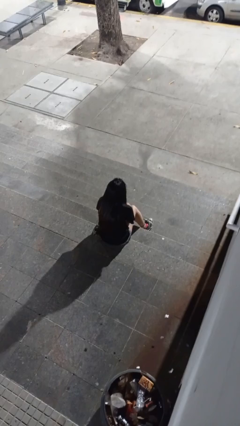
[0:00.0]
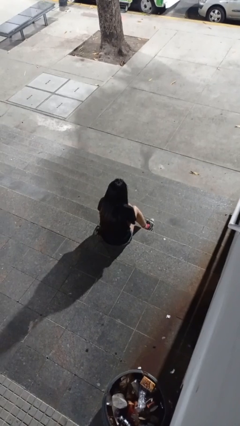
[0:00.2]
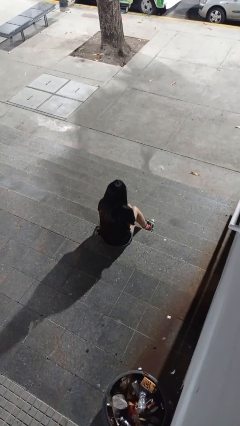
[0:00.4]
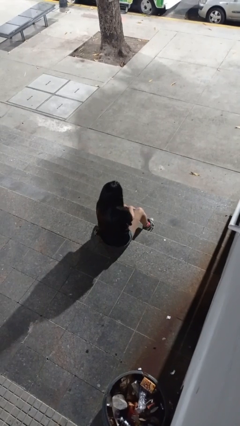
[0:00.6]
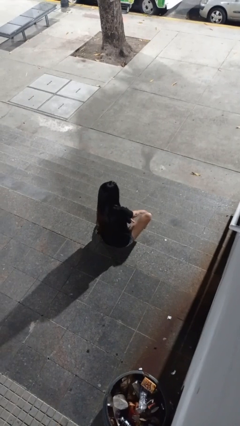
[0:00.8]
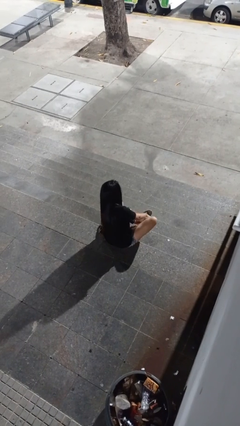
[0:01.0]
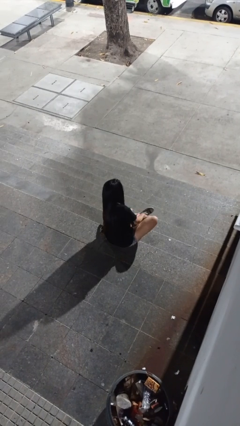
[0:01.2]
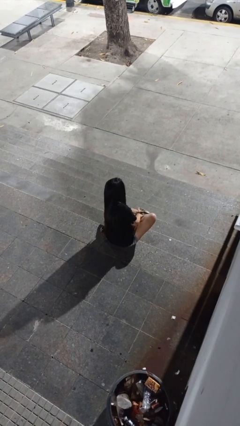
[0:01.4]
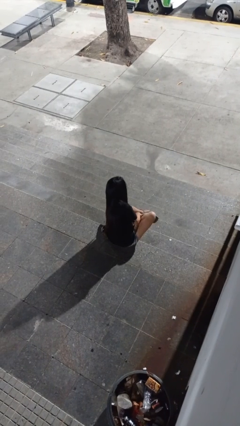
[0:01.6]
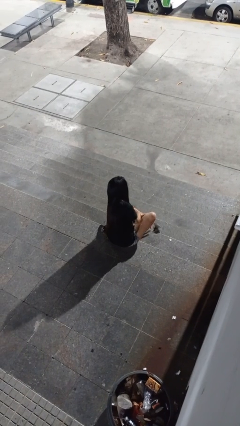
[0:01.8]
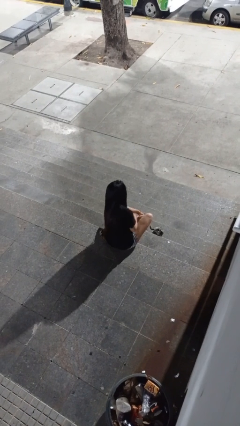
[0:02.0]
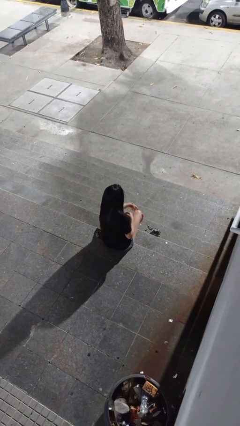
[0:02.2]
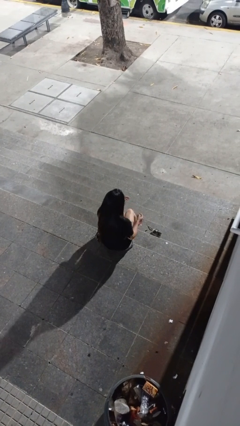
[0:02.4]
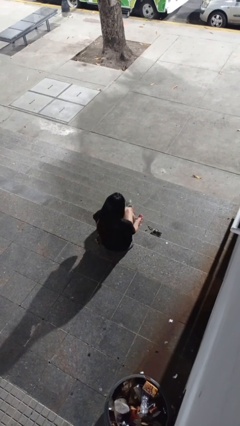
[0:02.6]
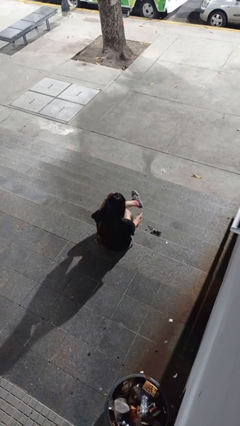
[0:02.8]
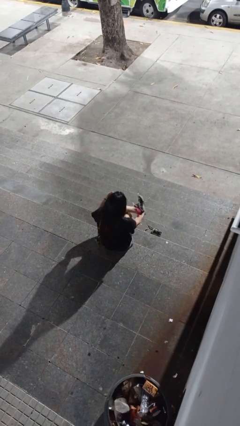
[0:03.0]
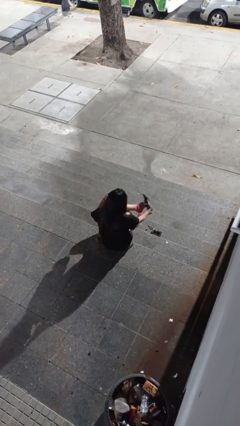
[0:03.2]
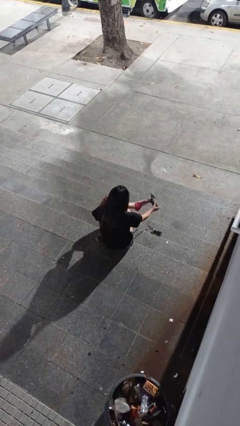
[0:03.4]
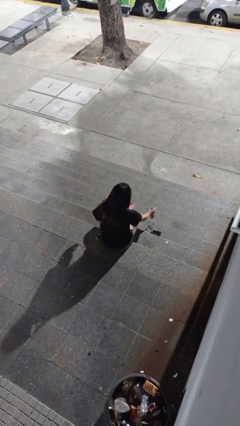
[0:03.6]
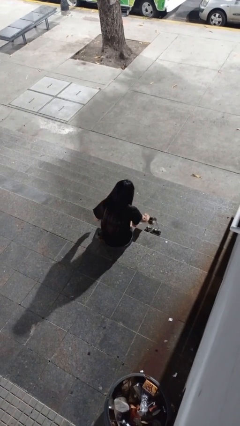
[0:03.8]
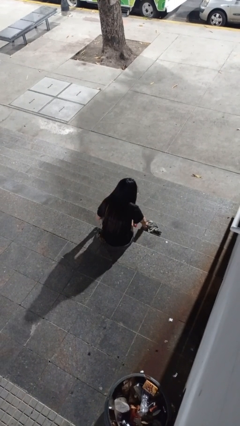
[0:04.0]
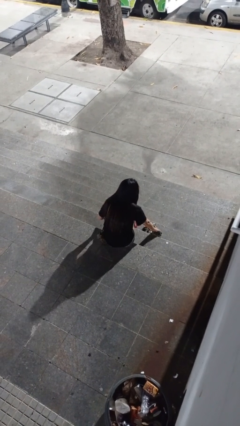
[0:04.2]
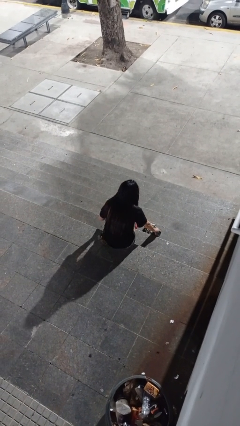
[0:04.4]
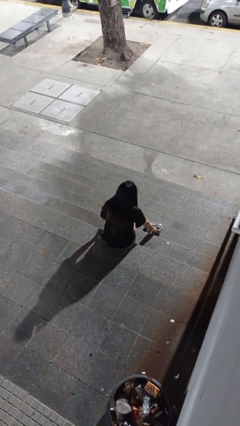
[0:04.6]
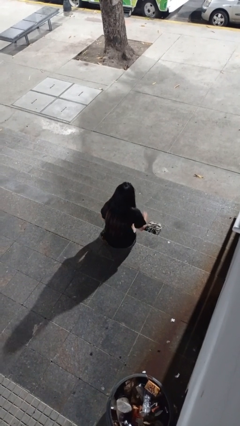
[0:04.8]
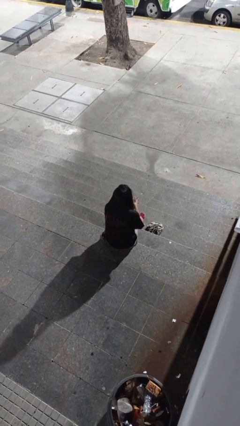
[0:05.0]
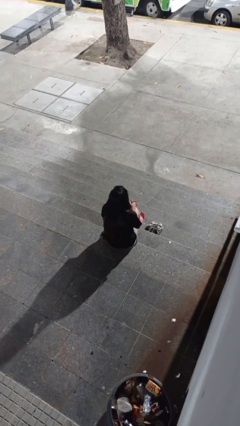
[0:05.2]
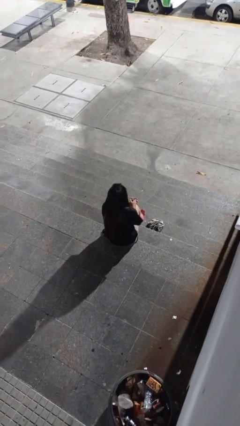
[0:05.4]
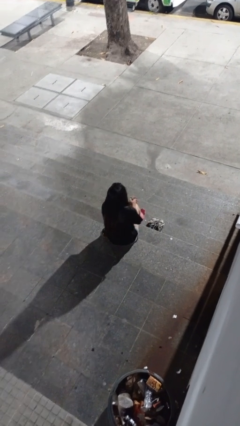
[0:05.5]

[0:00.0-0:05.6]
person takes off shoes

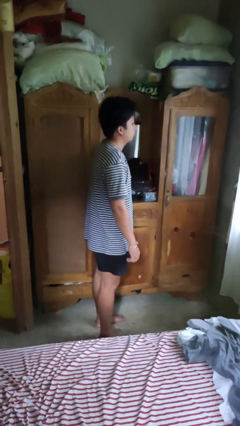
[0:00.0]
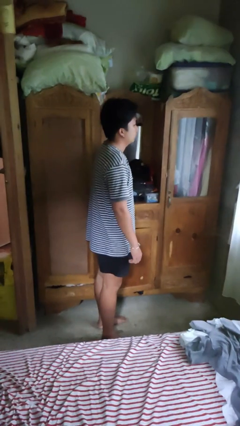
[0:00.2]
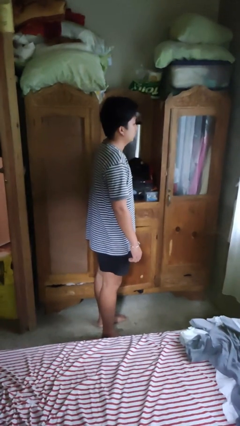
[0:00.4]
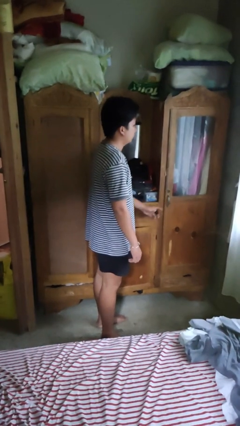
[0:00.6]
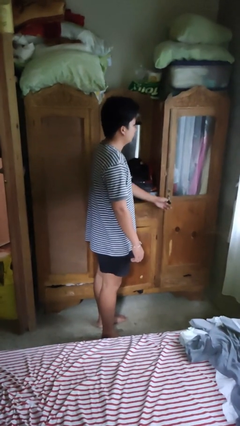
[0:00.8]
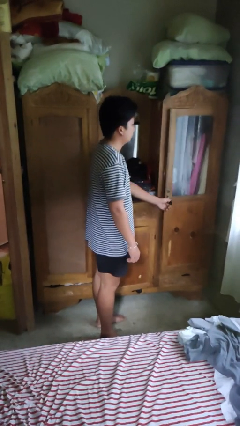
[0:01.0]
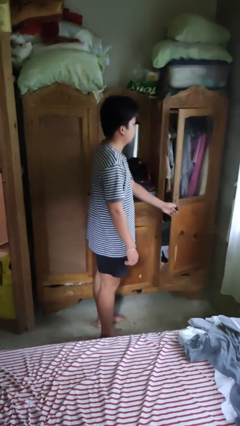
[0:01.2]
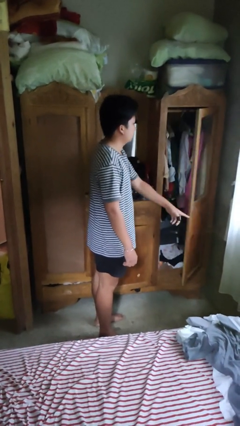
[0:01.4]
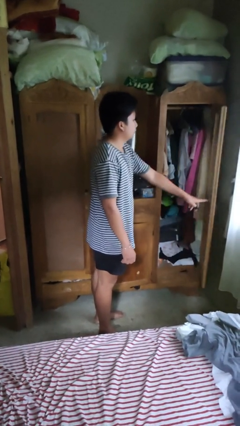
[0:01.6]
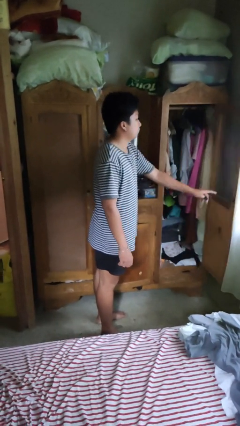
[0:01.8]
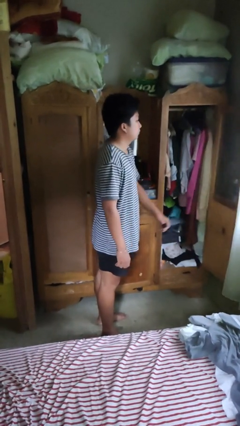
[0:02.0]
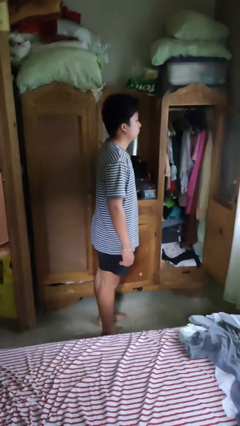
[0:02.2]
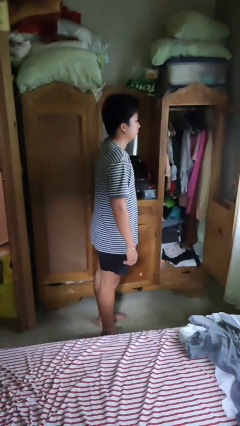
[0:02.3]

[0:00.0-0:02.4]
person opens closet door

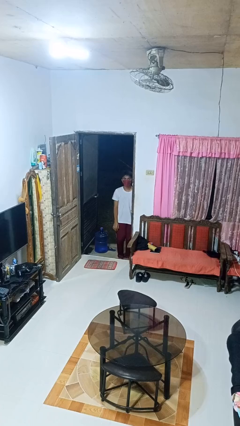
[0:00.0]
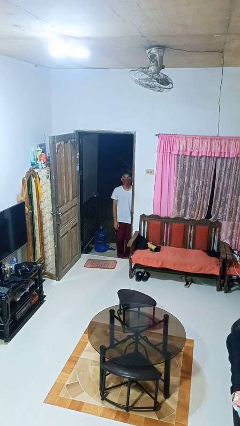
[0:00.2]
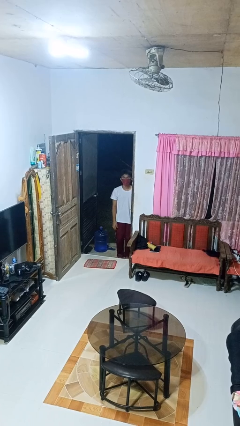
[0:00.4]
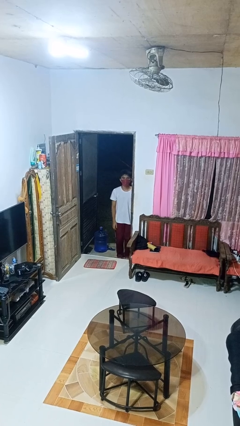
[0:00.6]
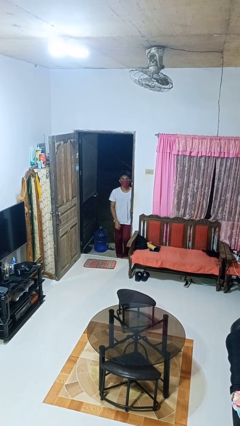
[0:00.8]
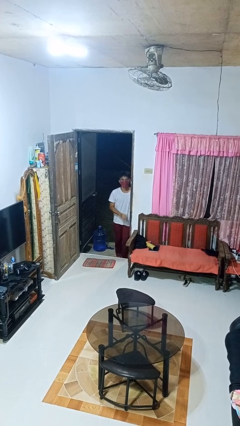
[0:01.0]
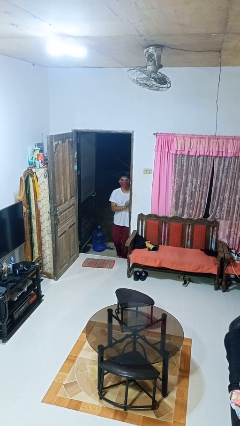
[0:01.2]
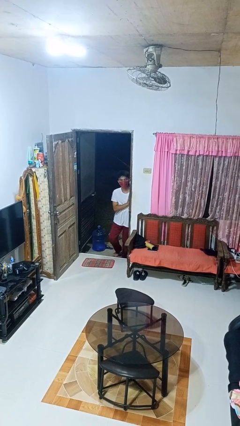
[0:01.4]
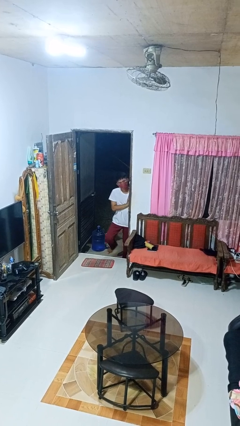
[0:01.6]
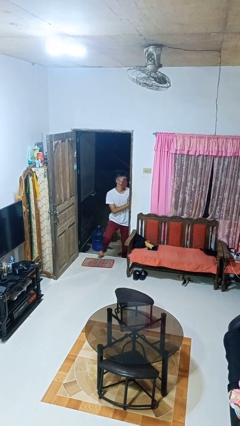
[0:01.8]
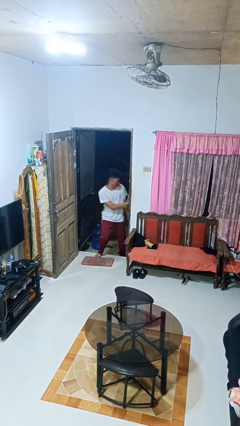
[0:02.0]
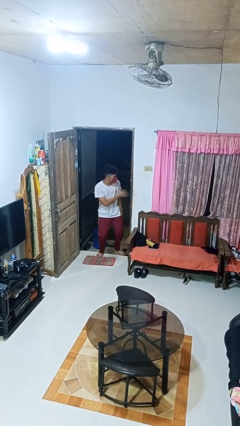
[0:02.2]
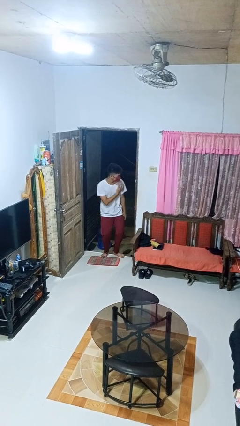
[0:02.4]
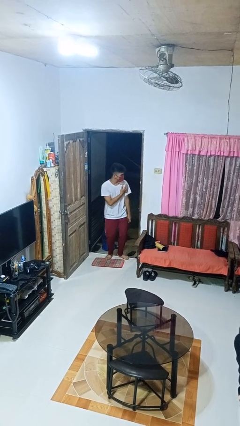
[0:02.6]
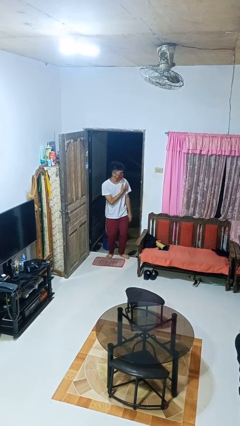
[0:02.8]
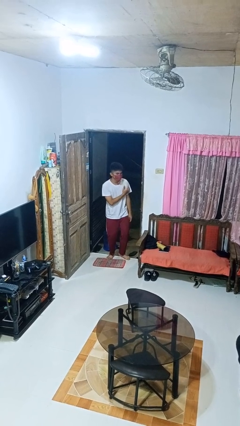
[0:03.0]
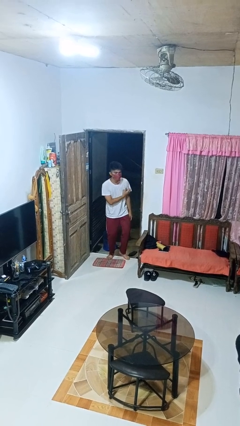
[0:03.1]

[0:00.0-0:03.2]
person bumps into wall

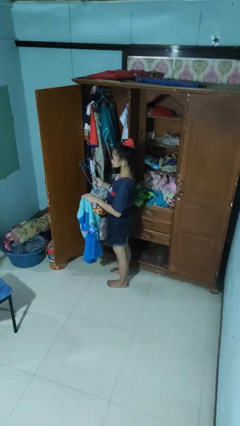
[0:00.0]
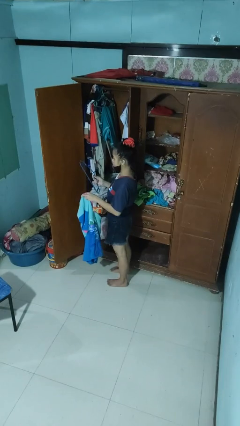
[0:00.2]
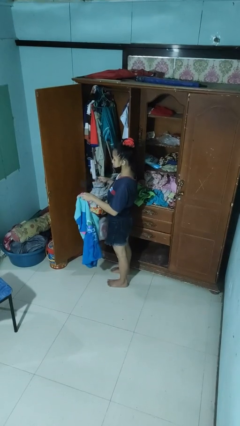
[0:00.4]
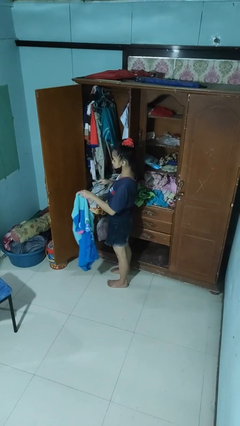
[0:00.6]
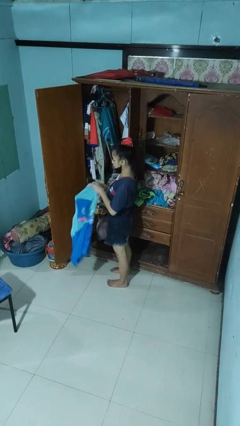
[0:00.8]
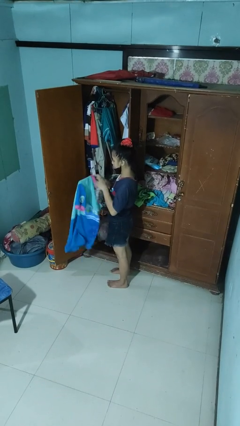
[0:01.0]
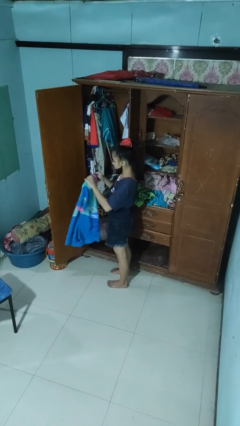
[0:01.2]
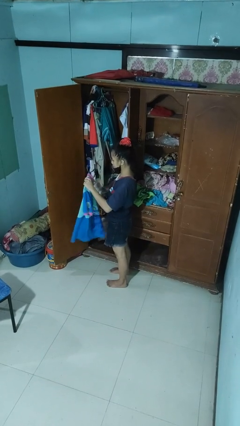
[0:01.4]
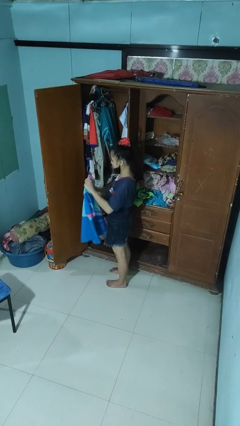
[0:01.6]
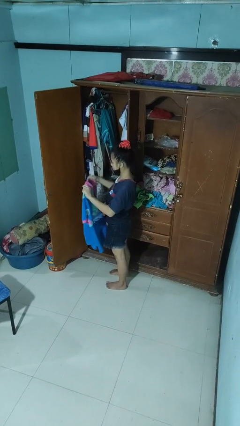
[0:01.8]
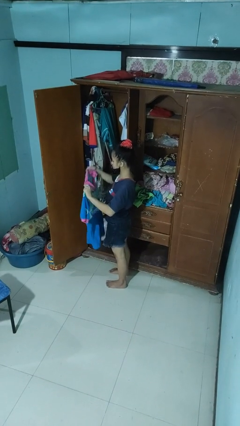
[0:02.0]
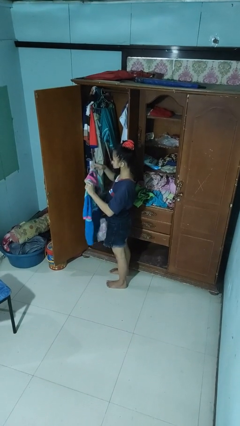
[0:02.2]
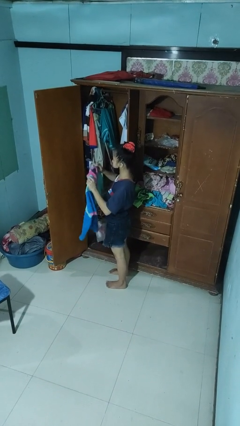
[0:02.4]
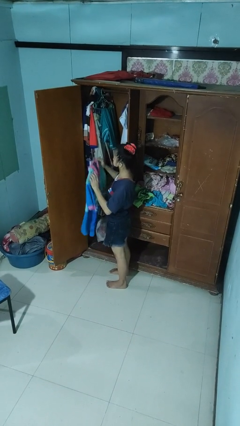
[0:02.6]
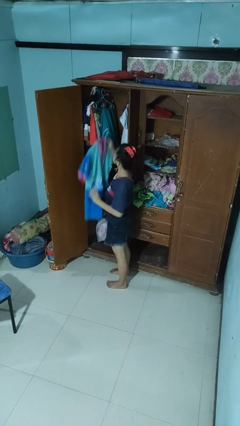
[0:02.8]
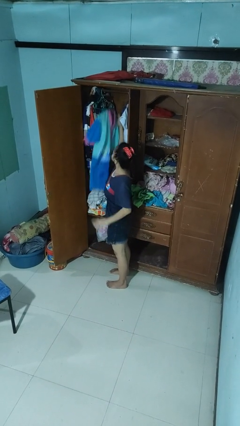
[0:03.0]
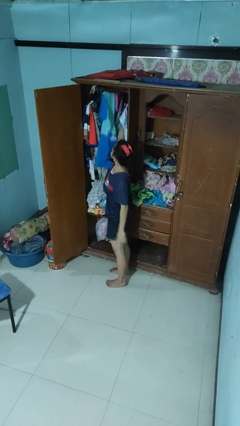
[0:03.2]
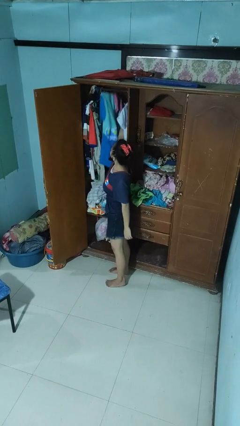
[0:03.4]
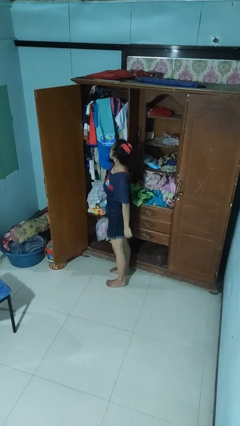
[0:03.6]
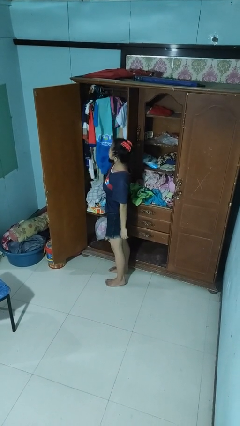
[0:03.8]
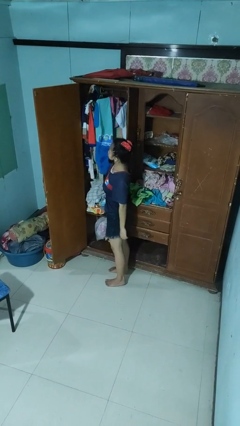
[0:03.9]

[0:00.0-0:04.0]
person puts clothes into closet

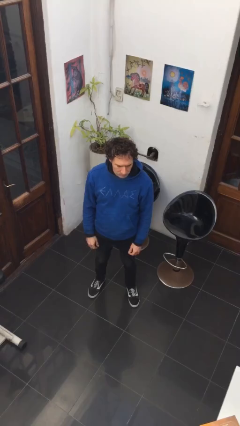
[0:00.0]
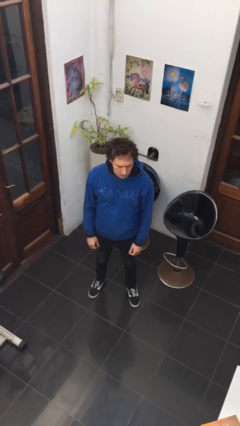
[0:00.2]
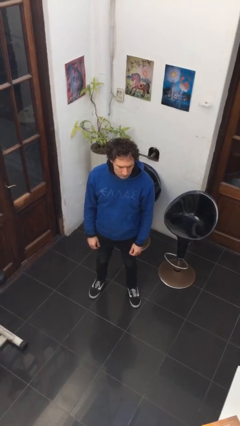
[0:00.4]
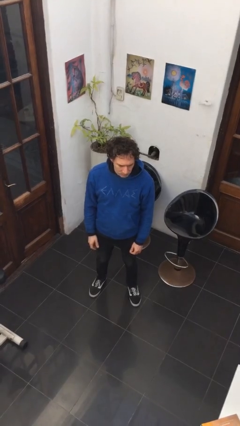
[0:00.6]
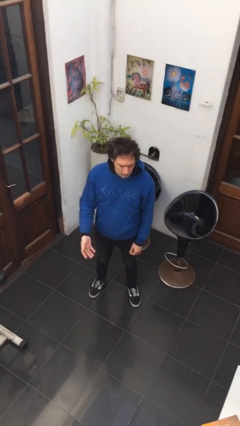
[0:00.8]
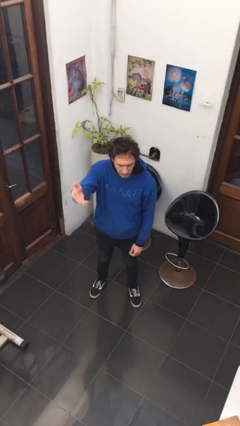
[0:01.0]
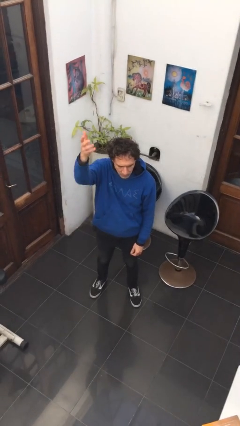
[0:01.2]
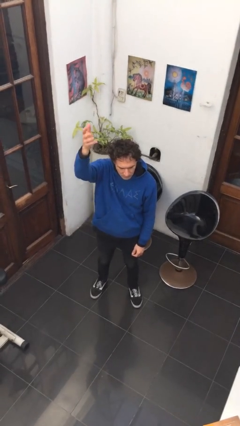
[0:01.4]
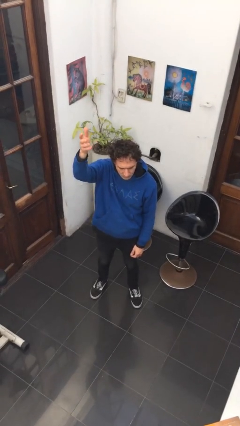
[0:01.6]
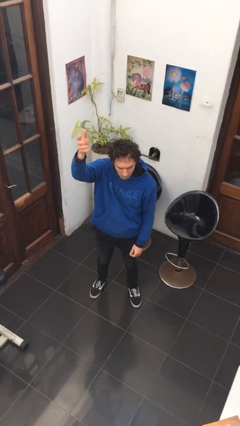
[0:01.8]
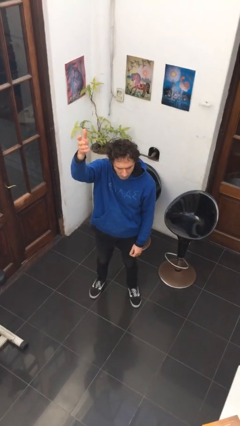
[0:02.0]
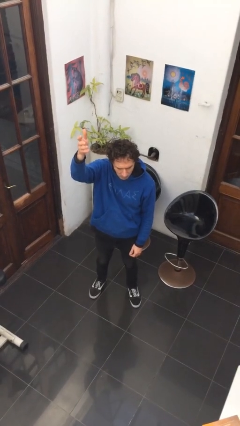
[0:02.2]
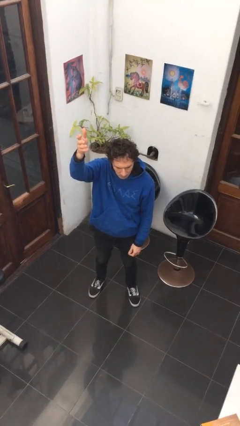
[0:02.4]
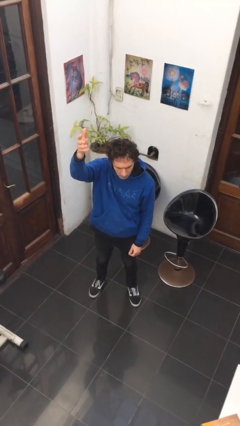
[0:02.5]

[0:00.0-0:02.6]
person gestures swipe up
